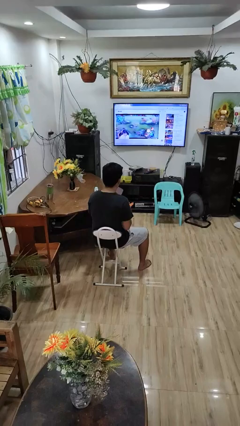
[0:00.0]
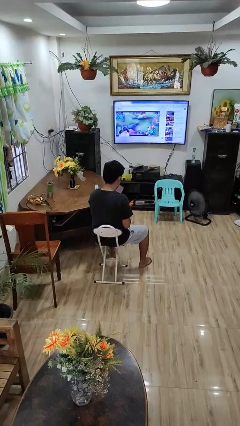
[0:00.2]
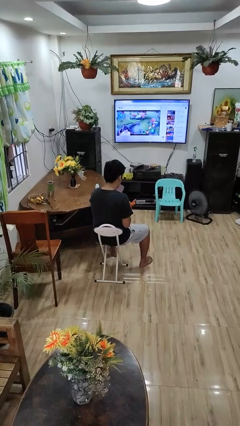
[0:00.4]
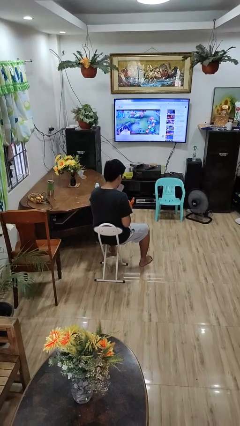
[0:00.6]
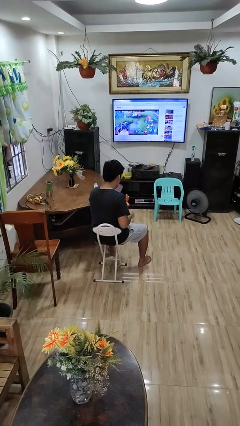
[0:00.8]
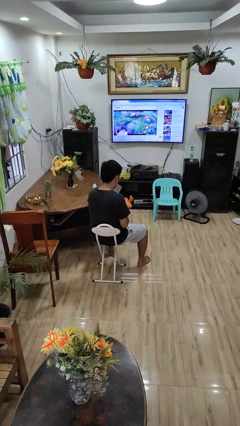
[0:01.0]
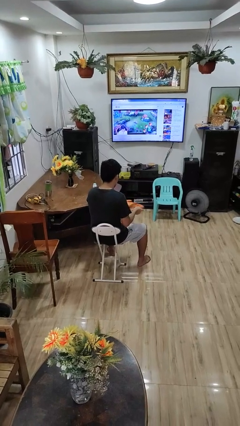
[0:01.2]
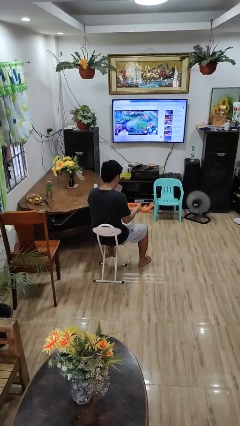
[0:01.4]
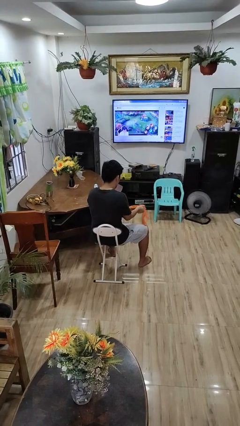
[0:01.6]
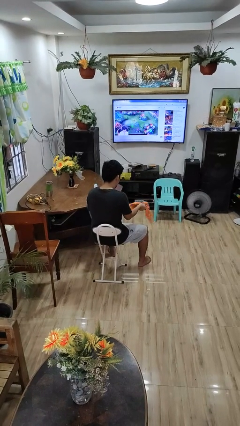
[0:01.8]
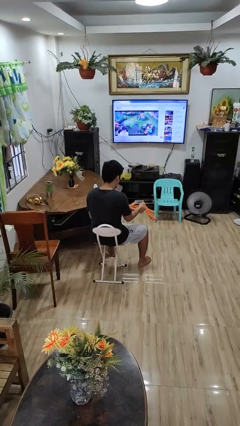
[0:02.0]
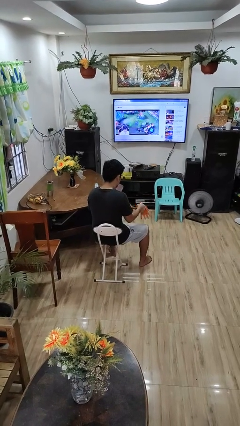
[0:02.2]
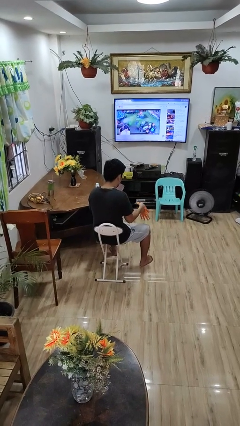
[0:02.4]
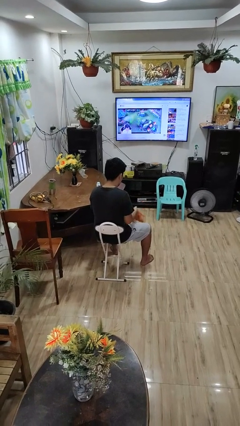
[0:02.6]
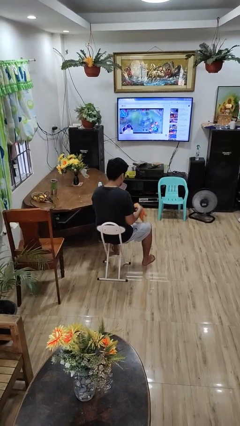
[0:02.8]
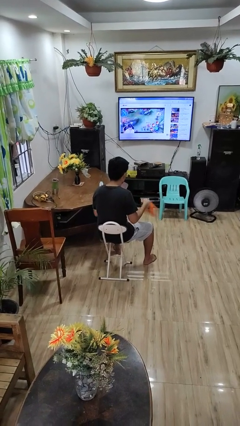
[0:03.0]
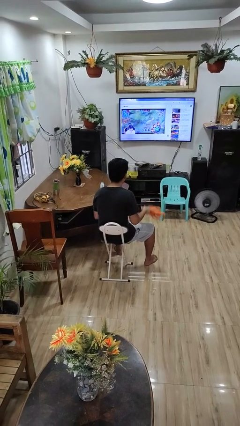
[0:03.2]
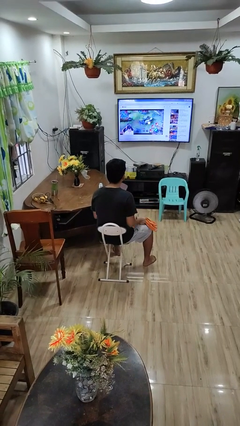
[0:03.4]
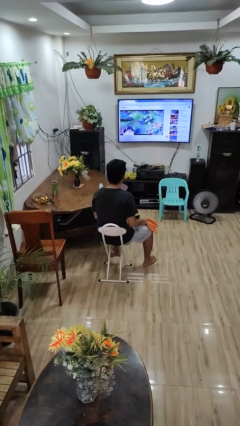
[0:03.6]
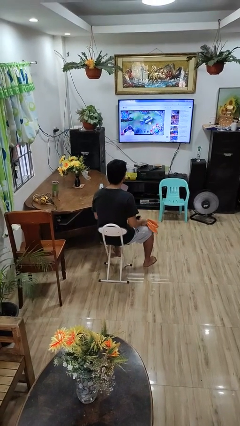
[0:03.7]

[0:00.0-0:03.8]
person takes off gloves

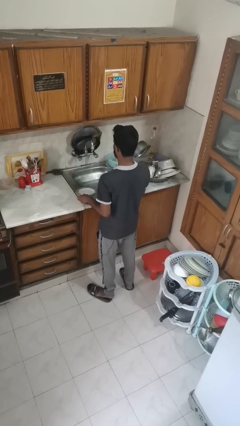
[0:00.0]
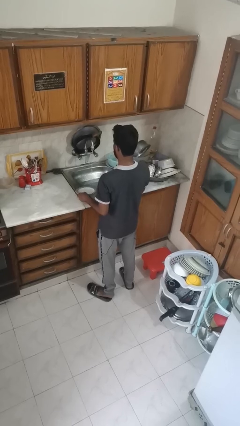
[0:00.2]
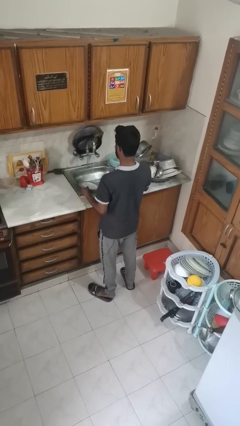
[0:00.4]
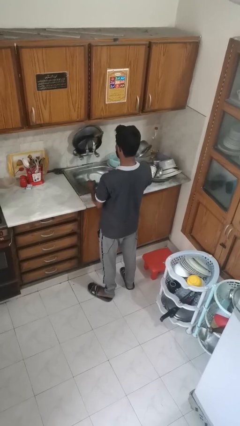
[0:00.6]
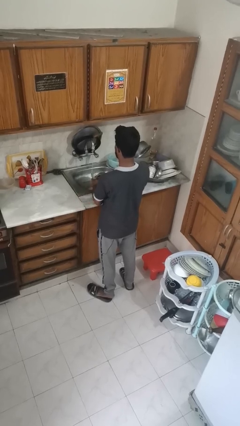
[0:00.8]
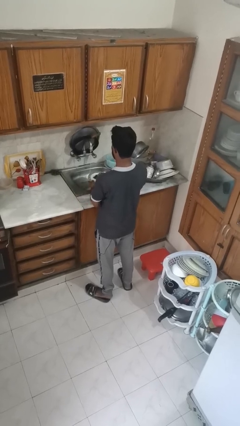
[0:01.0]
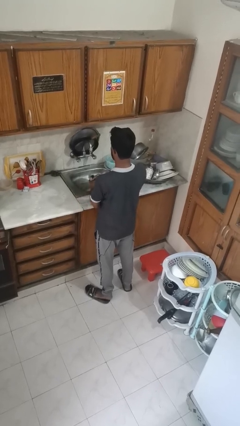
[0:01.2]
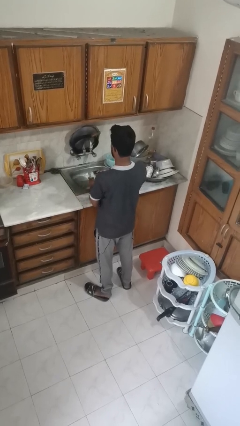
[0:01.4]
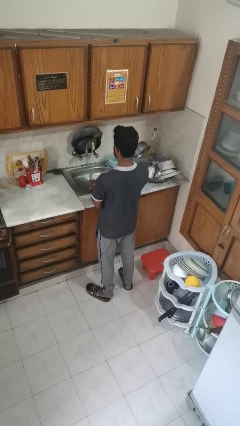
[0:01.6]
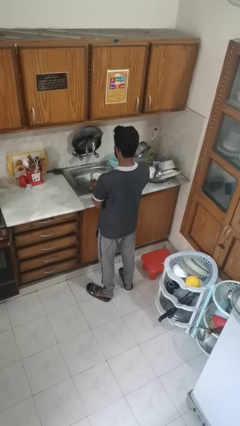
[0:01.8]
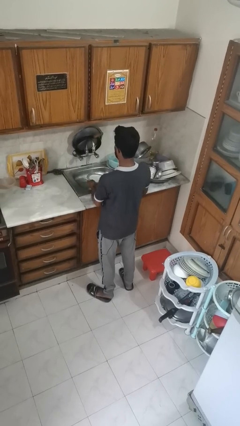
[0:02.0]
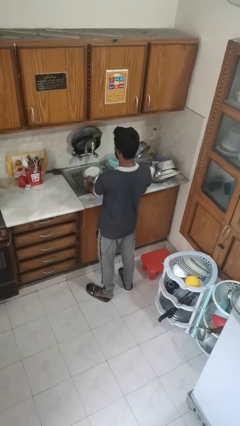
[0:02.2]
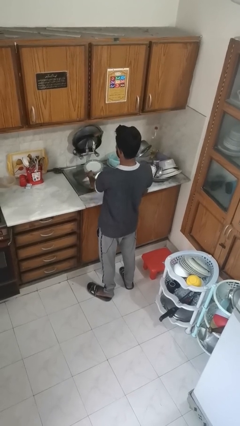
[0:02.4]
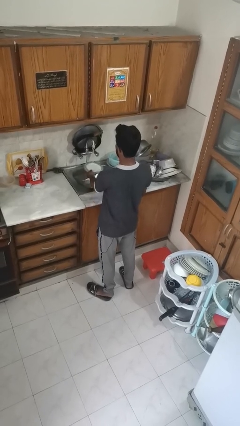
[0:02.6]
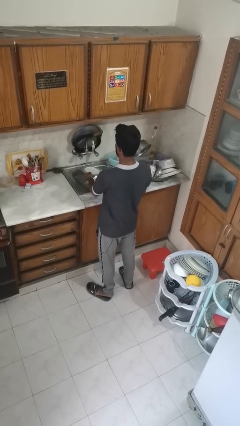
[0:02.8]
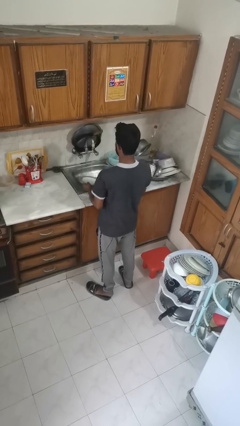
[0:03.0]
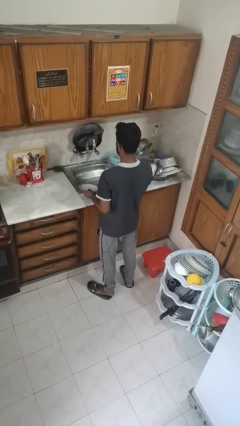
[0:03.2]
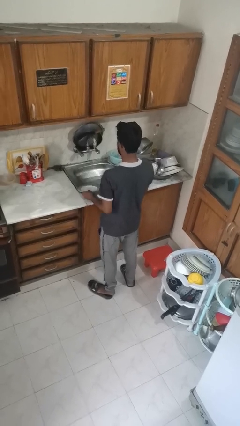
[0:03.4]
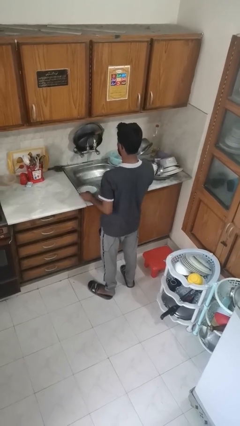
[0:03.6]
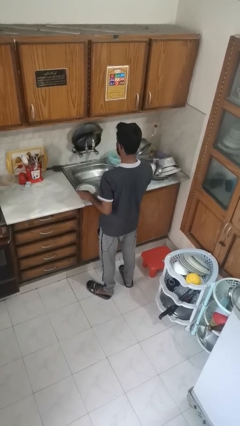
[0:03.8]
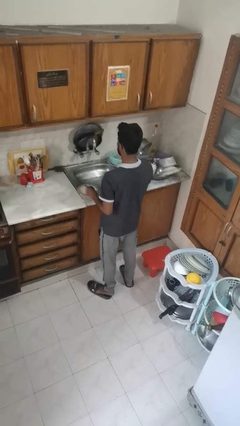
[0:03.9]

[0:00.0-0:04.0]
person washes dish

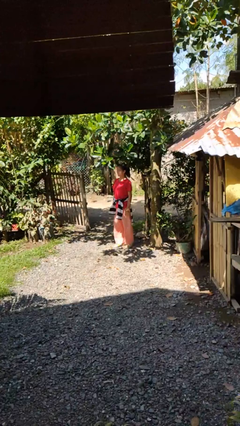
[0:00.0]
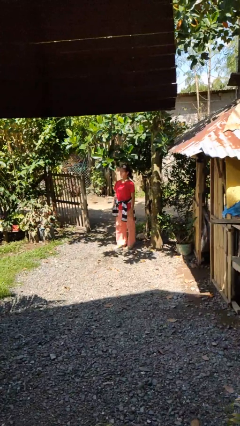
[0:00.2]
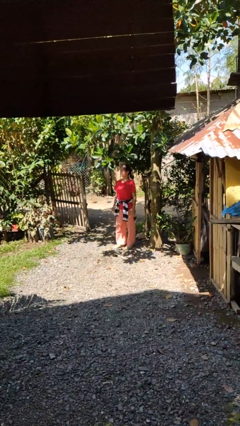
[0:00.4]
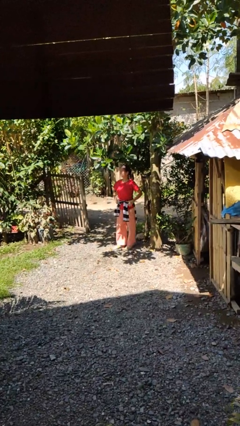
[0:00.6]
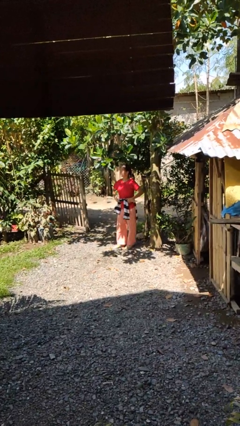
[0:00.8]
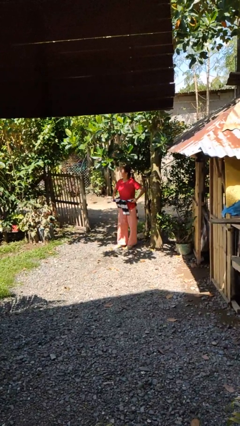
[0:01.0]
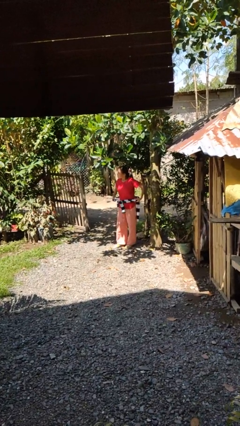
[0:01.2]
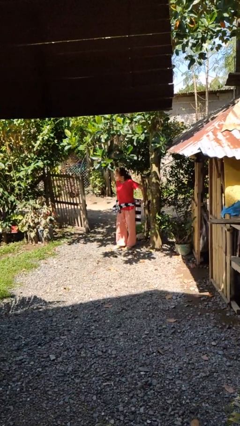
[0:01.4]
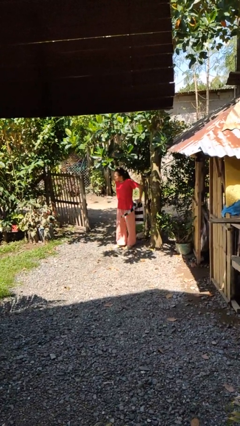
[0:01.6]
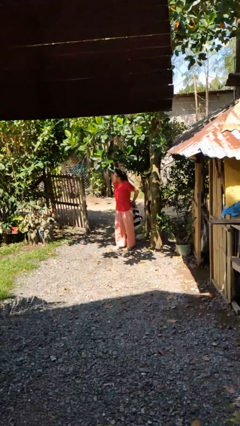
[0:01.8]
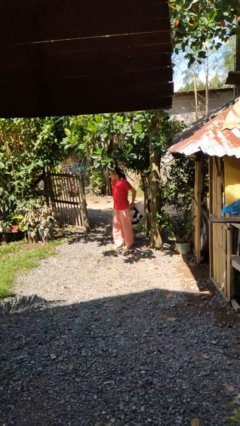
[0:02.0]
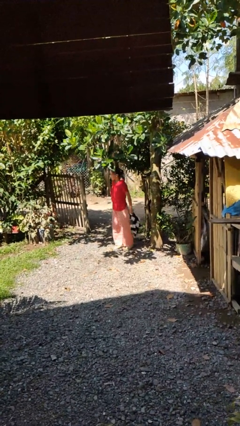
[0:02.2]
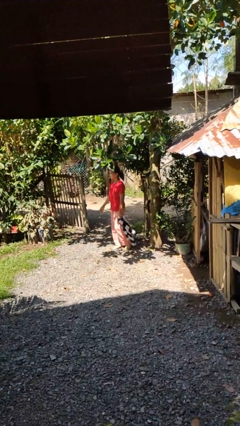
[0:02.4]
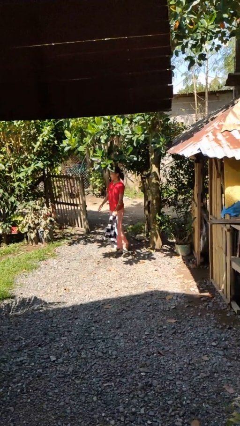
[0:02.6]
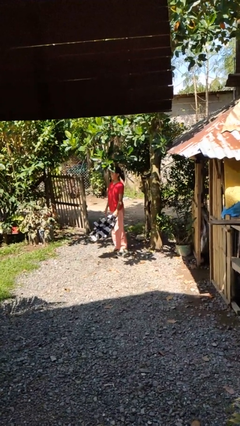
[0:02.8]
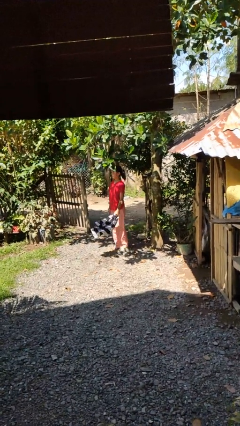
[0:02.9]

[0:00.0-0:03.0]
person unties jacket around waist

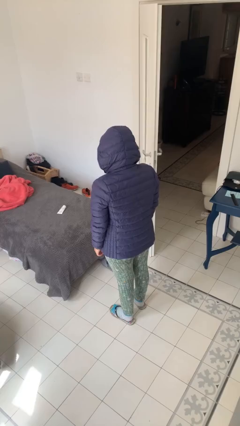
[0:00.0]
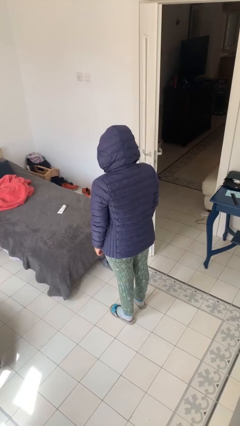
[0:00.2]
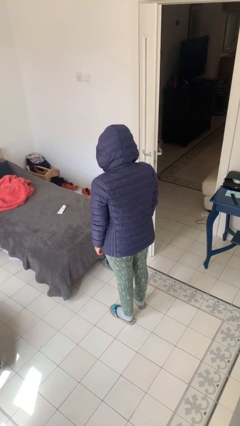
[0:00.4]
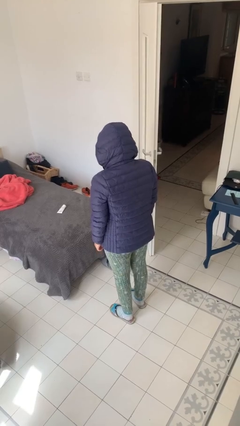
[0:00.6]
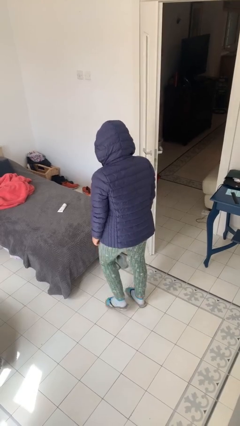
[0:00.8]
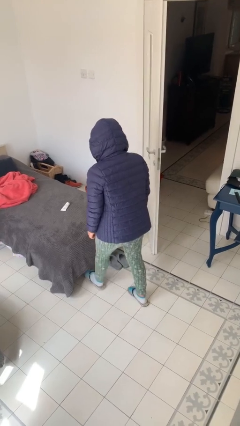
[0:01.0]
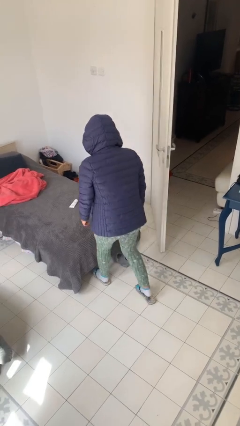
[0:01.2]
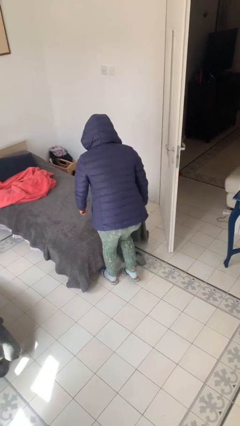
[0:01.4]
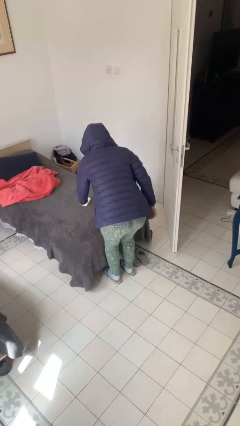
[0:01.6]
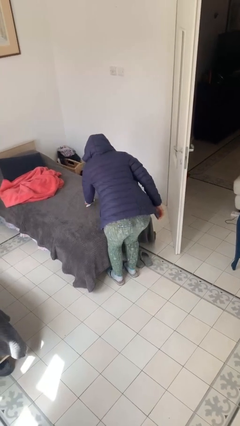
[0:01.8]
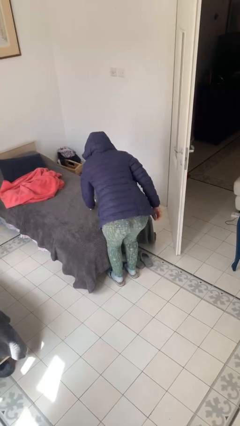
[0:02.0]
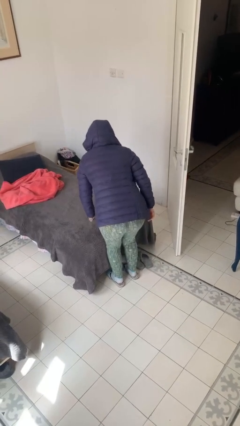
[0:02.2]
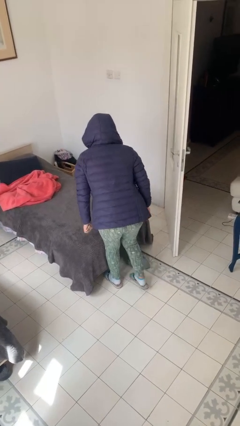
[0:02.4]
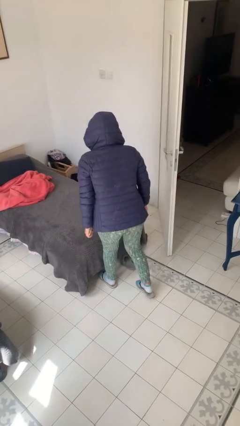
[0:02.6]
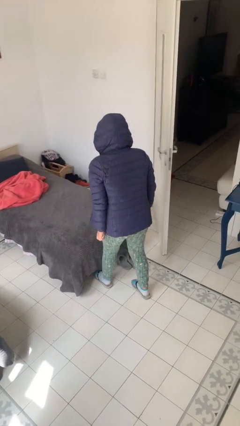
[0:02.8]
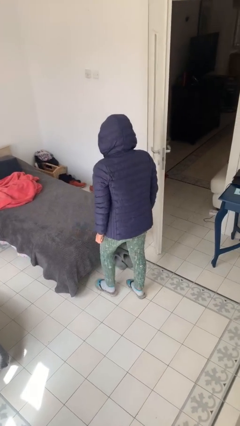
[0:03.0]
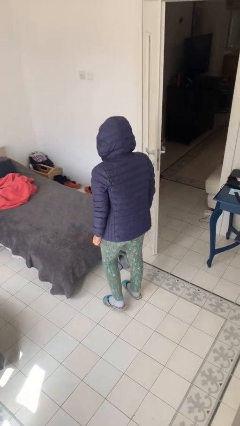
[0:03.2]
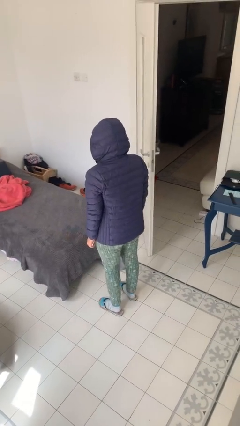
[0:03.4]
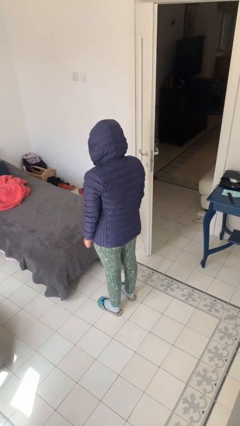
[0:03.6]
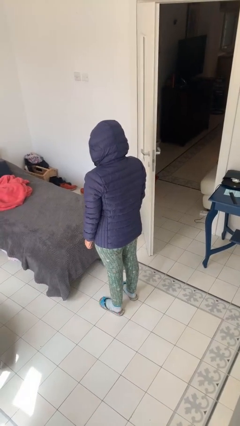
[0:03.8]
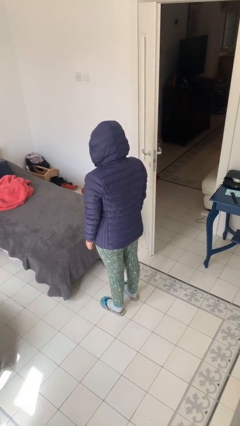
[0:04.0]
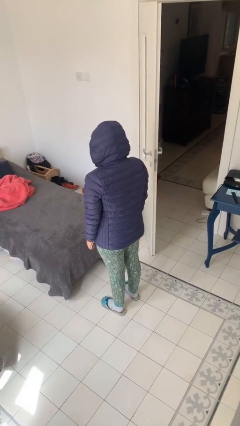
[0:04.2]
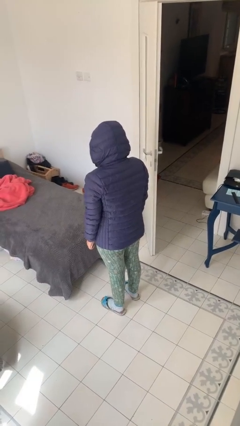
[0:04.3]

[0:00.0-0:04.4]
person picks up object from bed

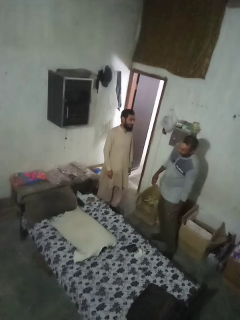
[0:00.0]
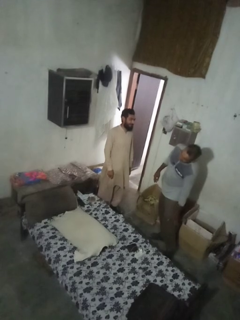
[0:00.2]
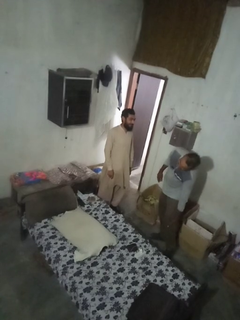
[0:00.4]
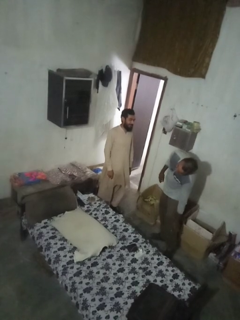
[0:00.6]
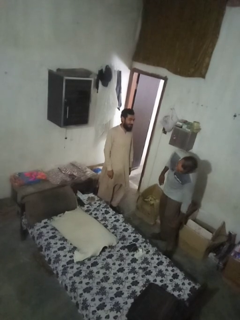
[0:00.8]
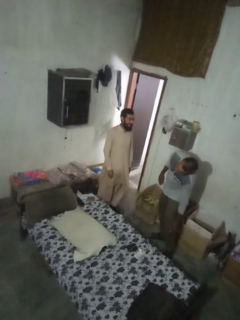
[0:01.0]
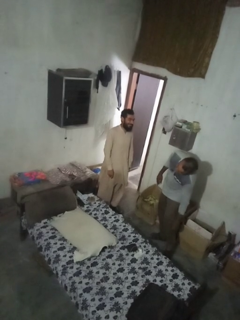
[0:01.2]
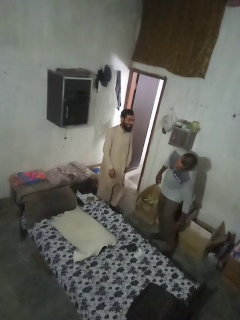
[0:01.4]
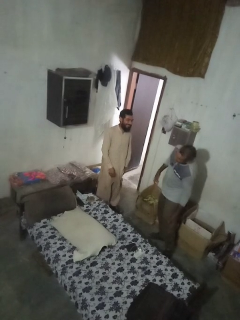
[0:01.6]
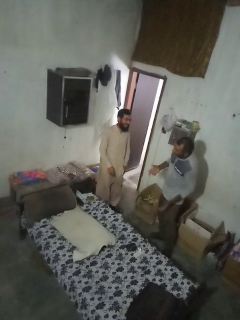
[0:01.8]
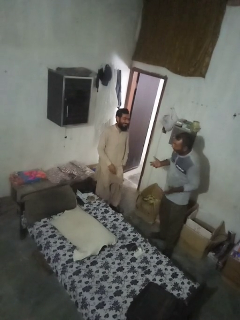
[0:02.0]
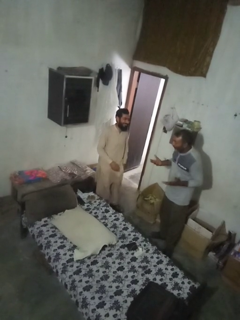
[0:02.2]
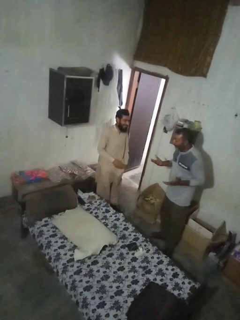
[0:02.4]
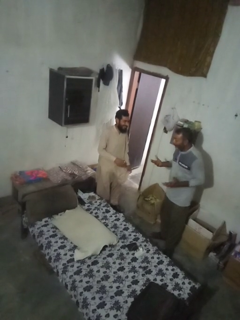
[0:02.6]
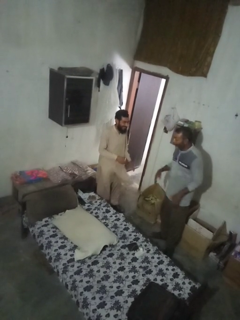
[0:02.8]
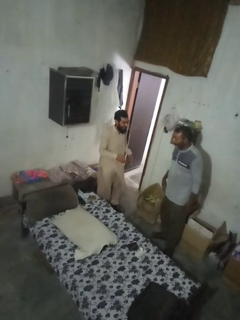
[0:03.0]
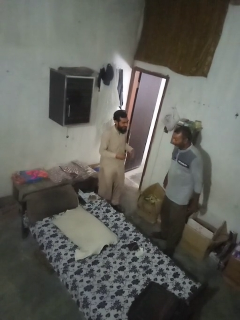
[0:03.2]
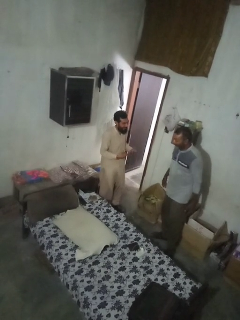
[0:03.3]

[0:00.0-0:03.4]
person laughs with person
